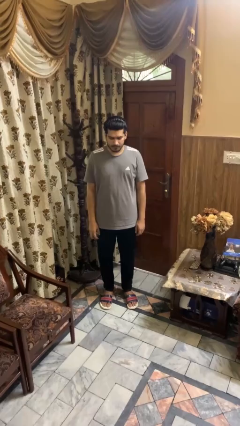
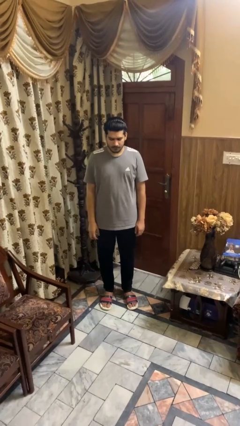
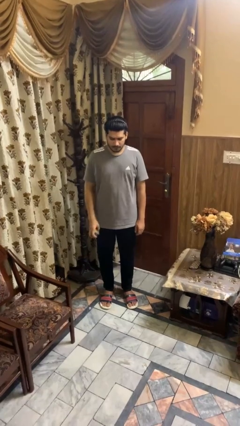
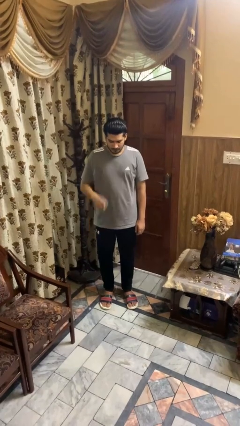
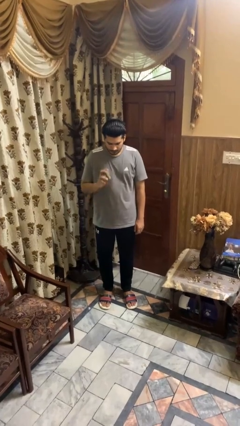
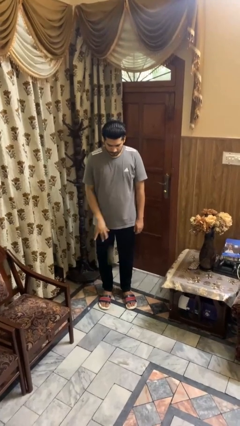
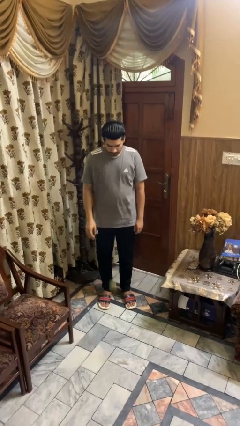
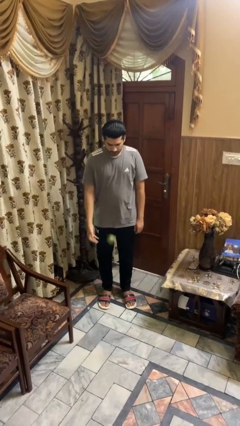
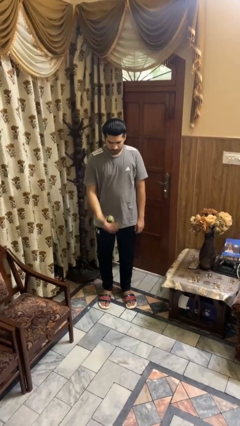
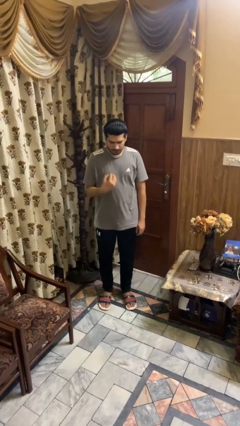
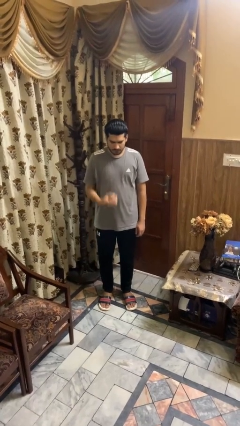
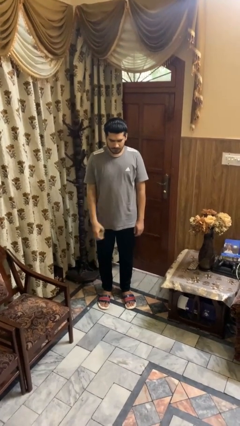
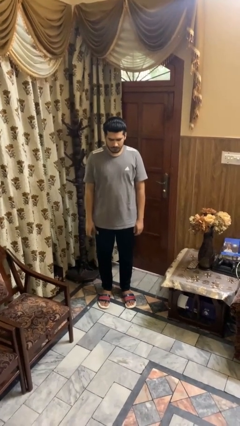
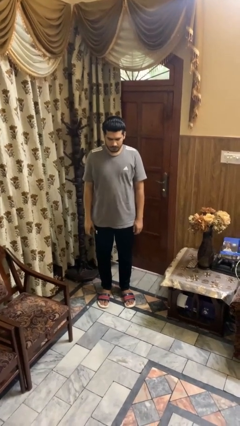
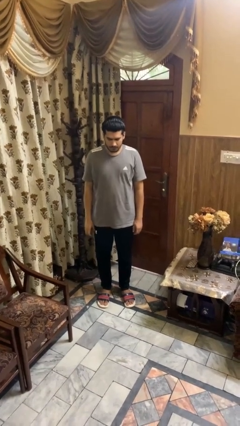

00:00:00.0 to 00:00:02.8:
person bounces ball on floor

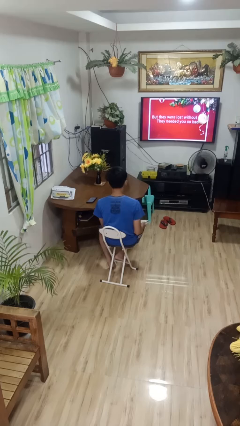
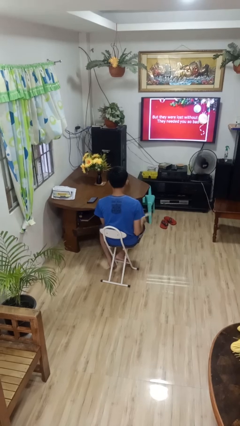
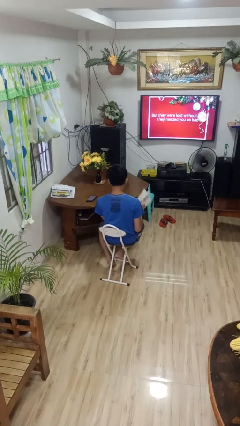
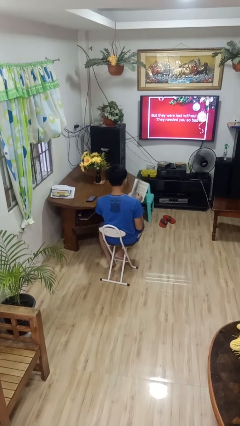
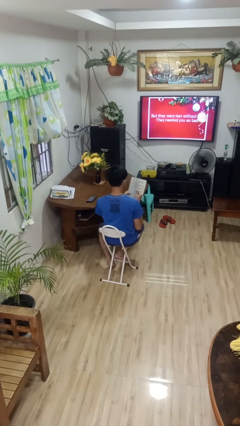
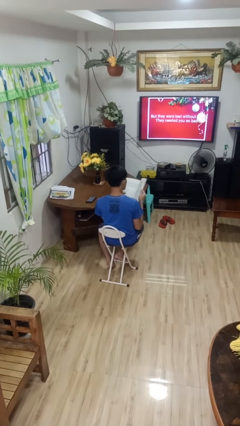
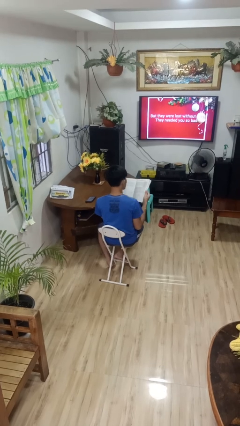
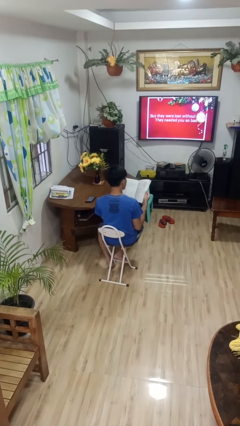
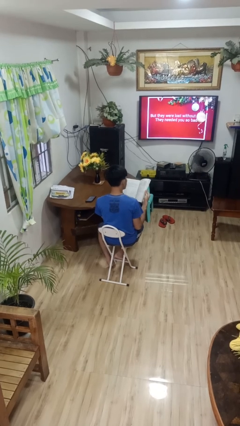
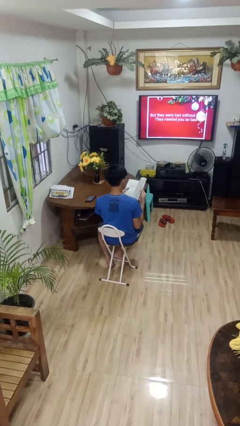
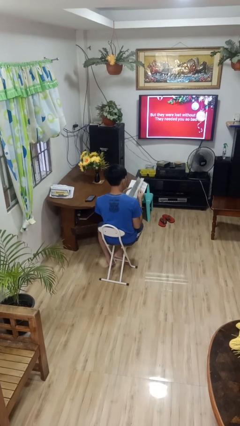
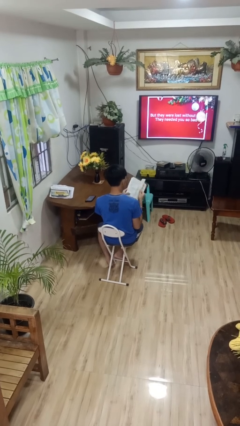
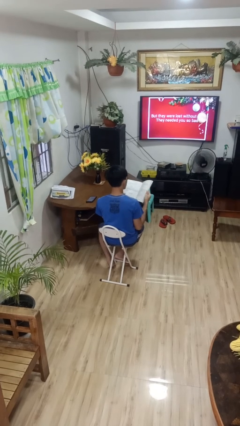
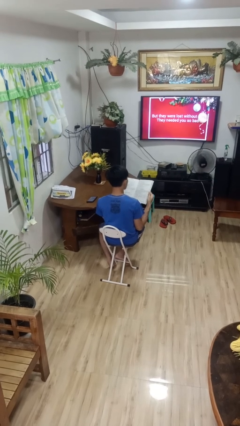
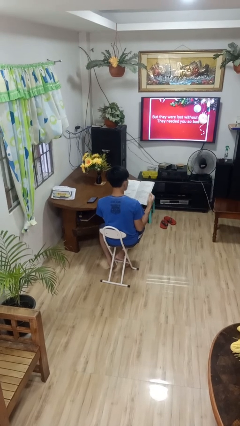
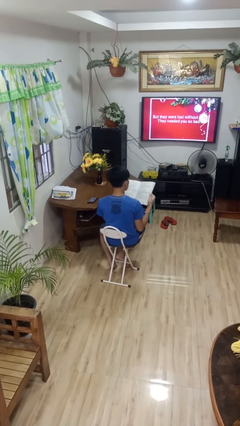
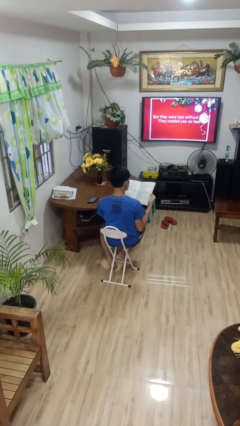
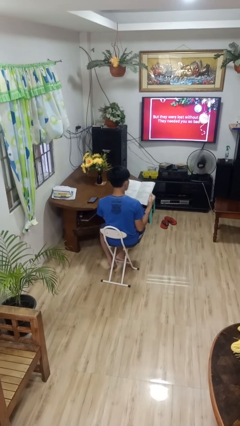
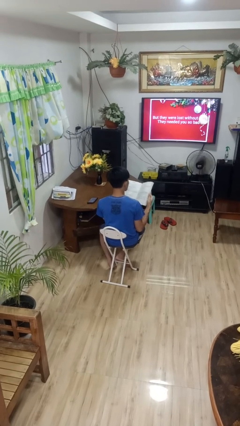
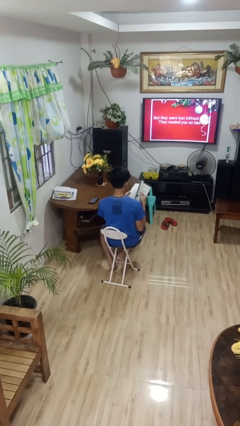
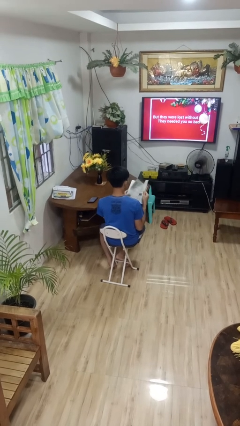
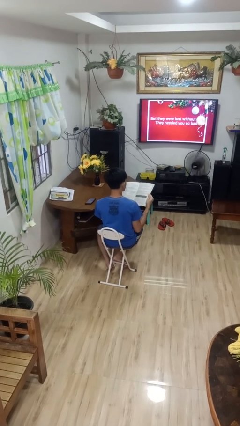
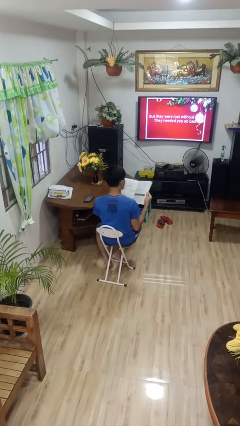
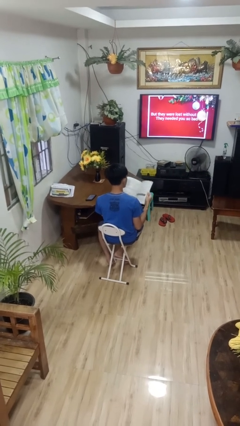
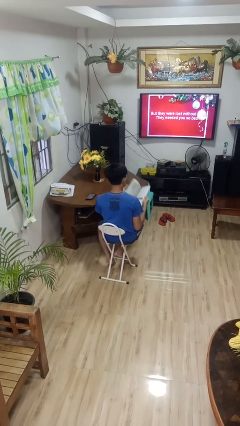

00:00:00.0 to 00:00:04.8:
person reads book

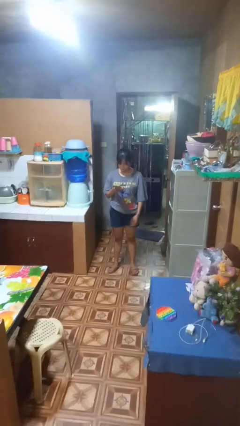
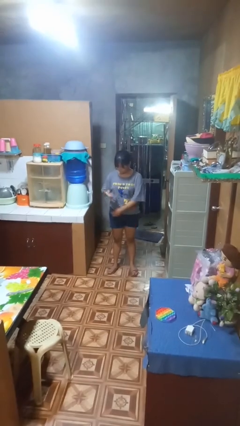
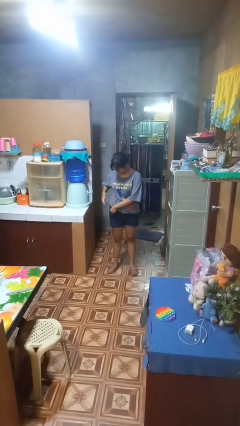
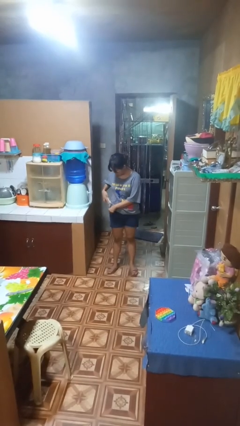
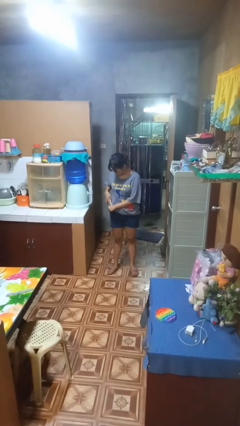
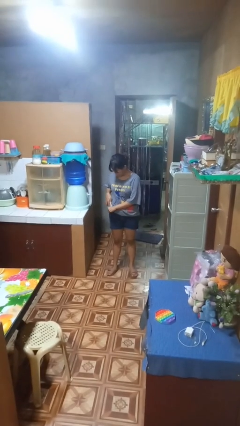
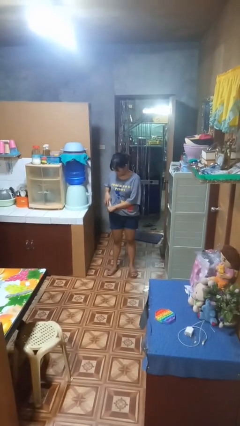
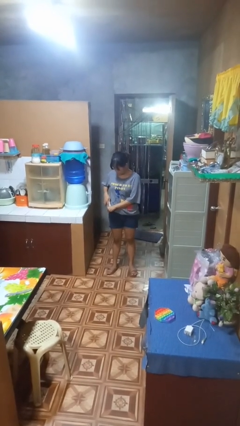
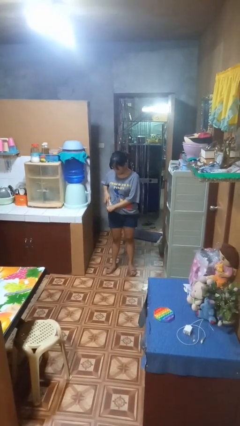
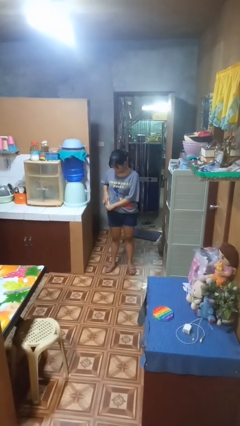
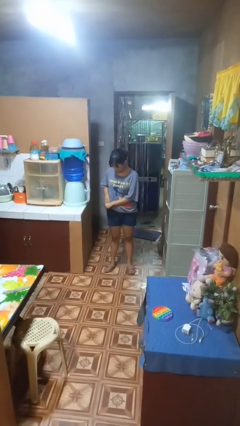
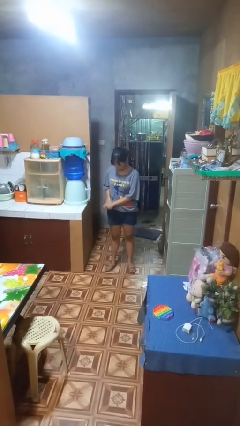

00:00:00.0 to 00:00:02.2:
person puts phone into pocket

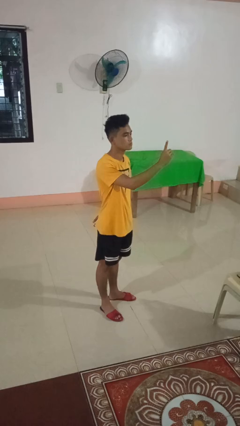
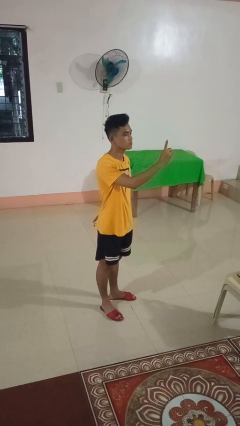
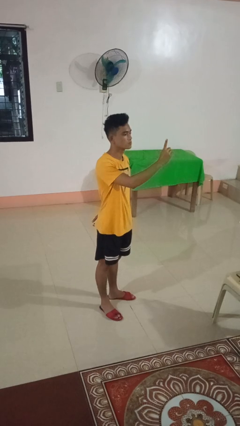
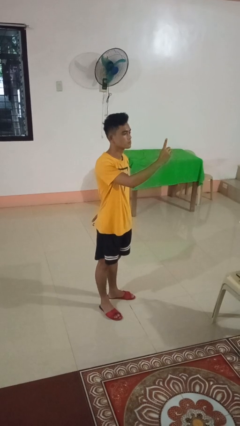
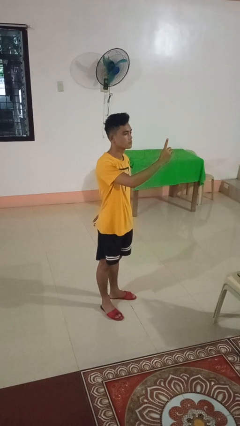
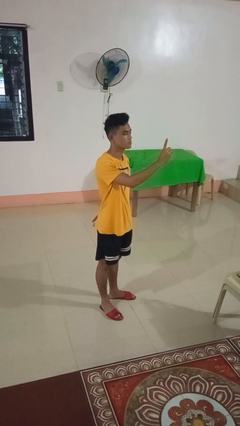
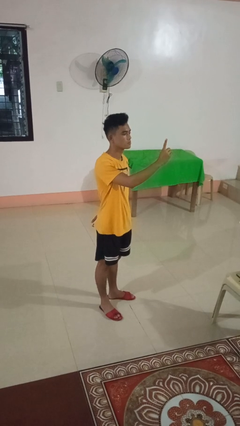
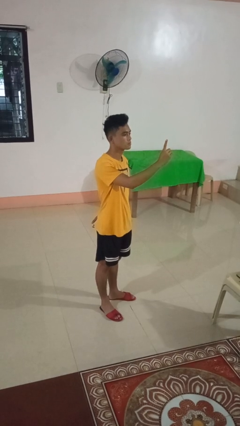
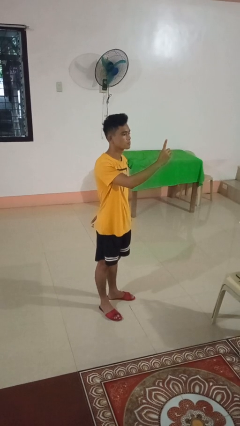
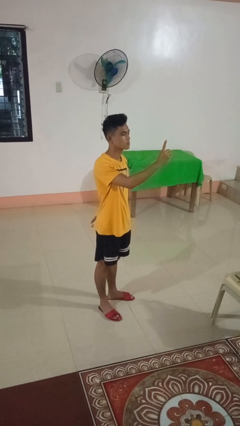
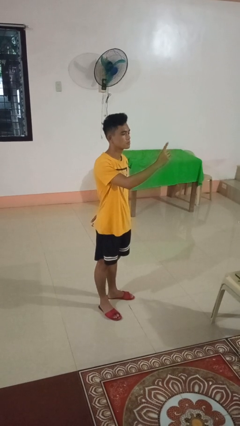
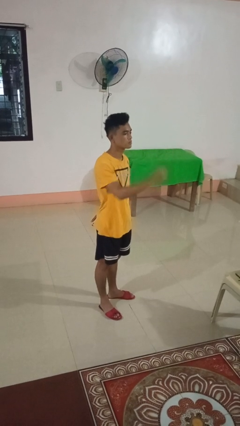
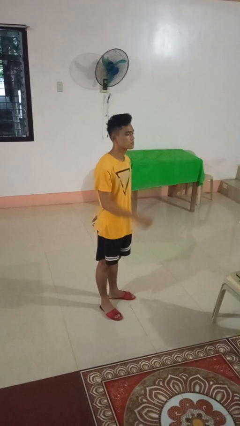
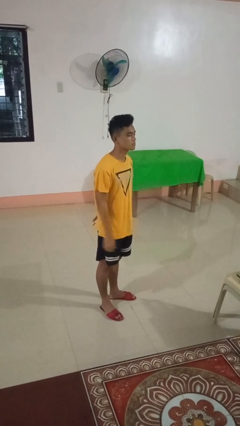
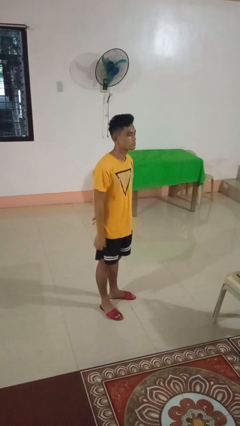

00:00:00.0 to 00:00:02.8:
person gestures number one

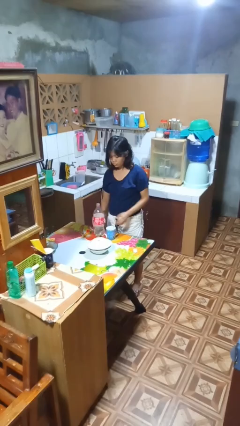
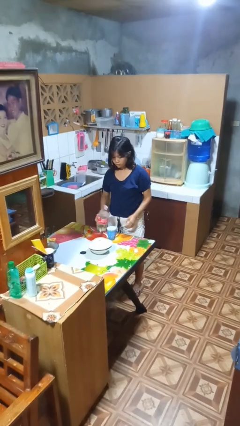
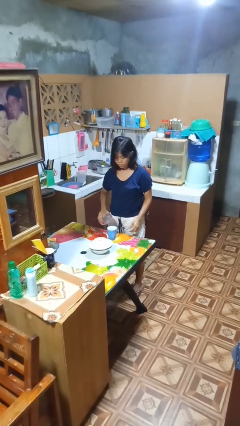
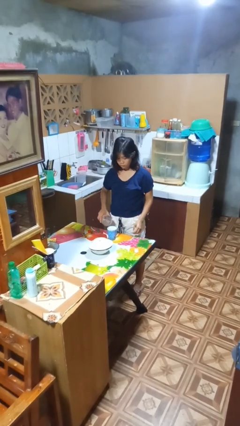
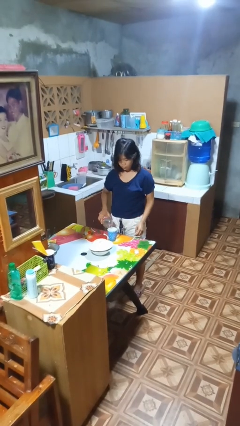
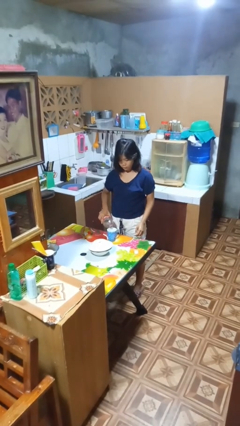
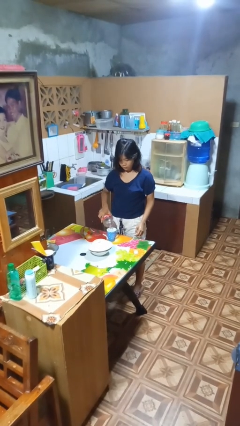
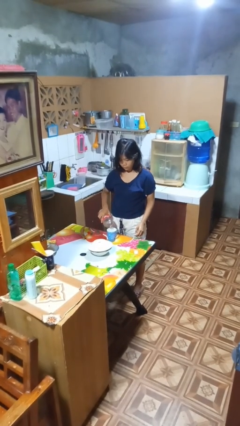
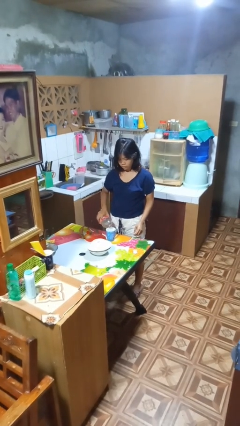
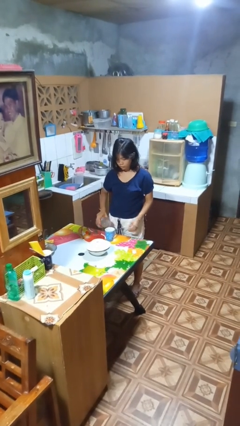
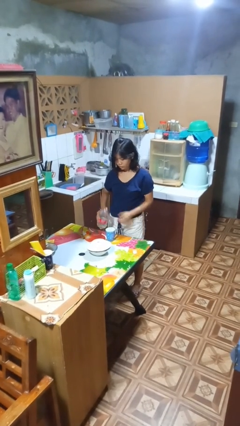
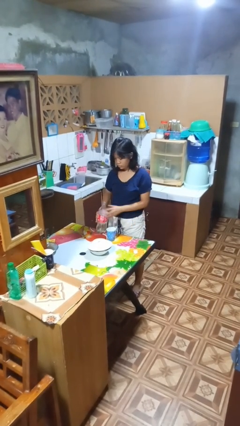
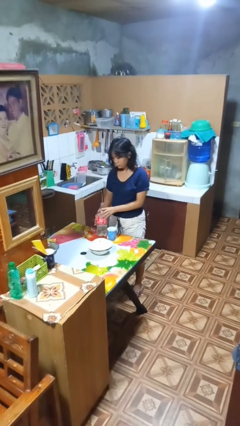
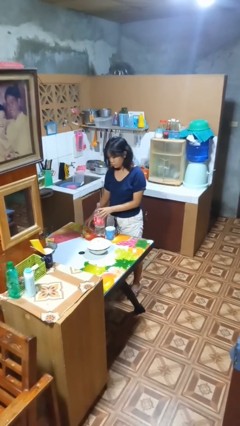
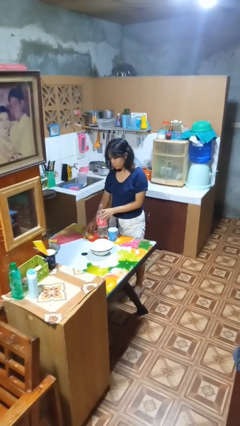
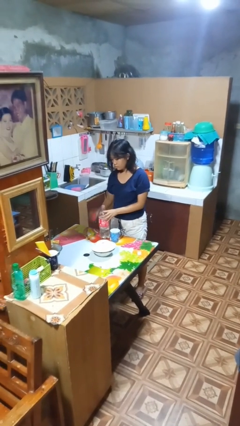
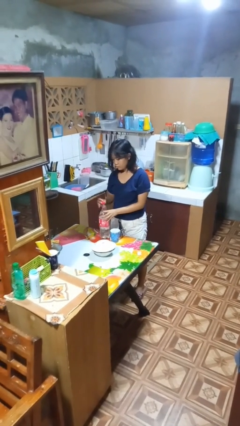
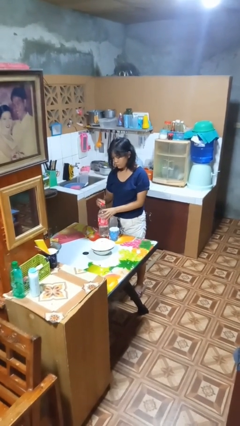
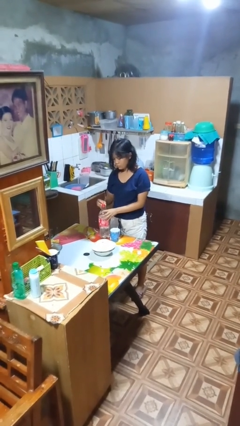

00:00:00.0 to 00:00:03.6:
person pours liquid into cup

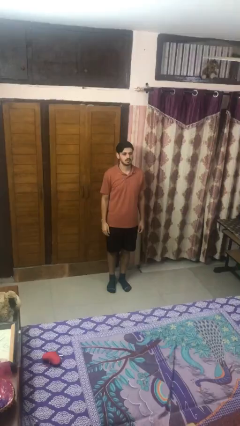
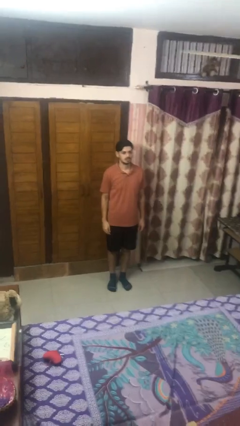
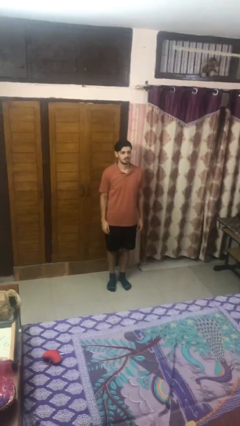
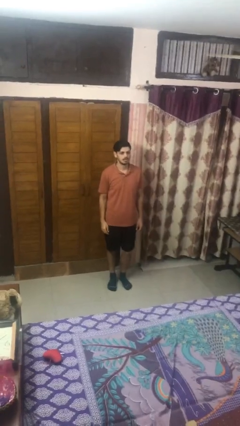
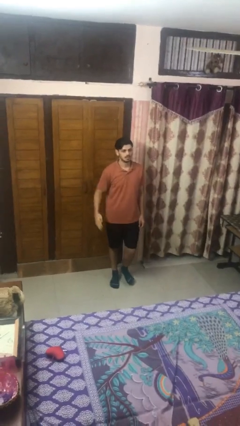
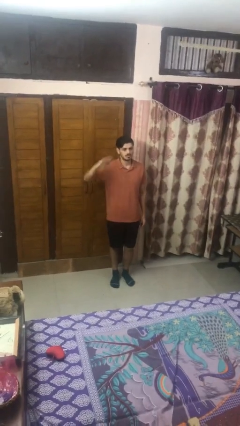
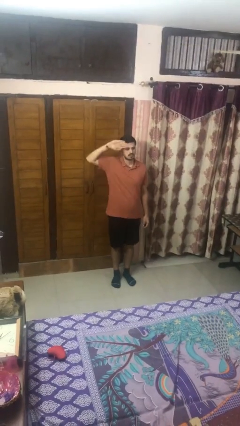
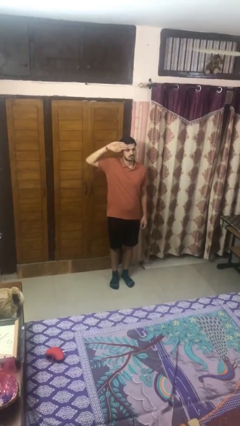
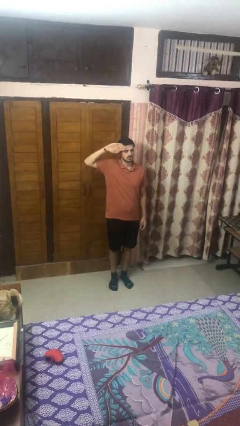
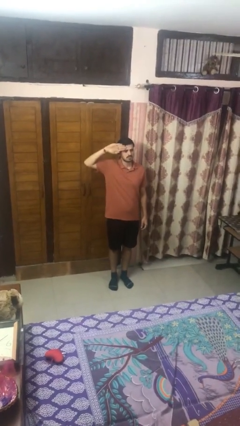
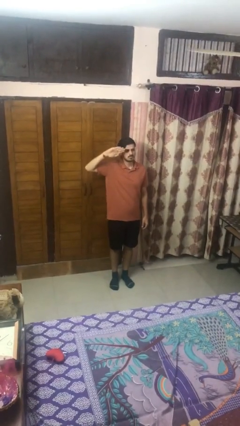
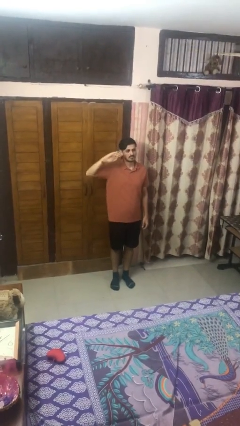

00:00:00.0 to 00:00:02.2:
person salutes
